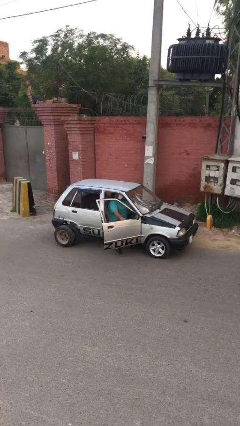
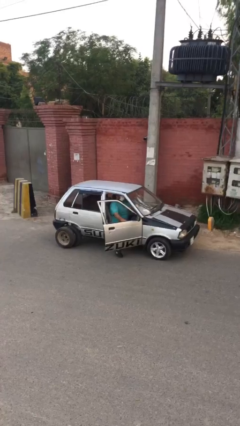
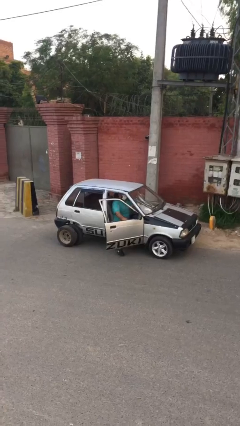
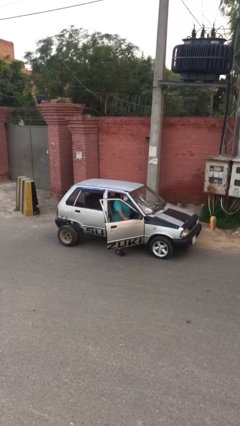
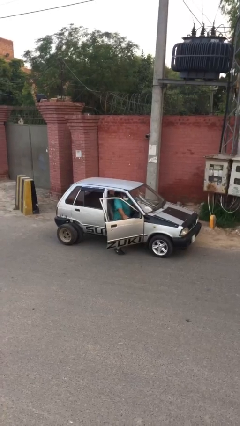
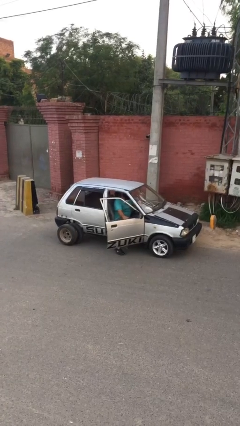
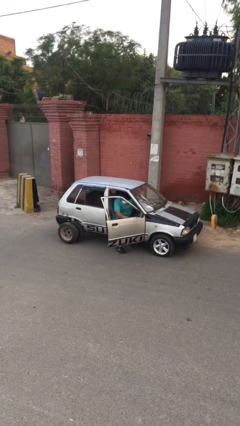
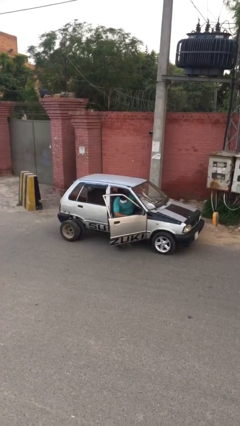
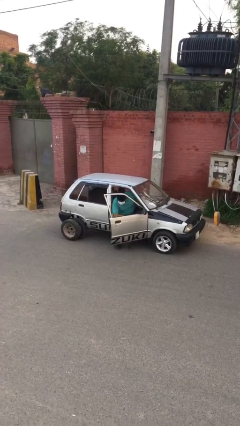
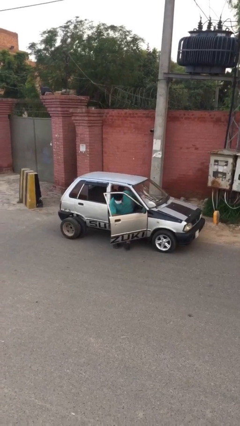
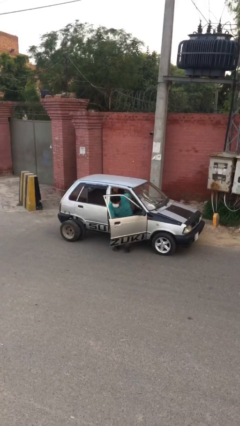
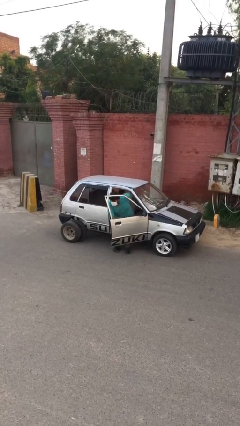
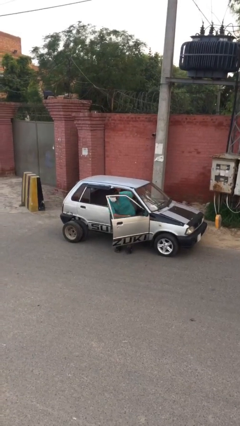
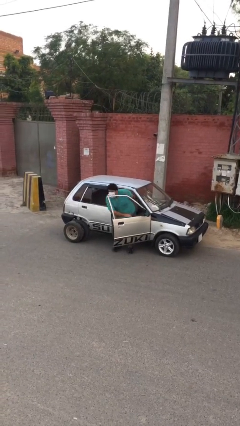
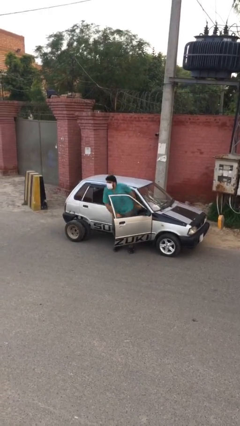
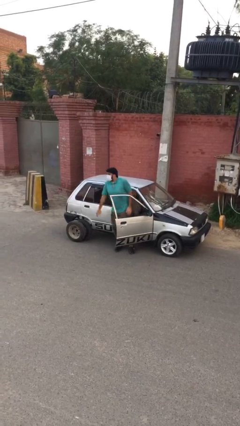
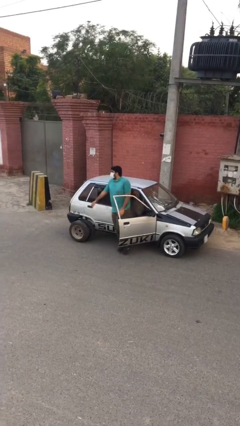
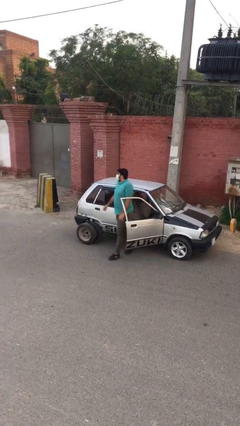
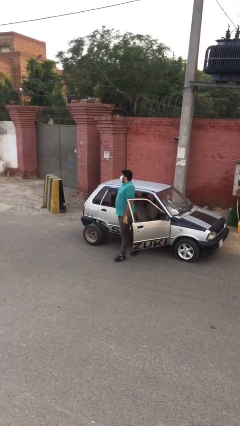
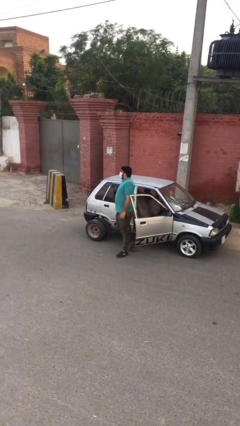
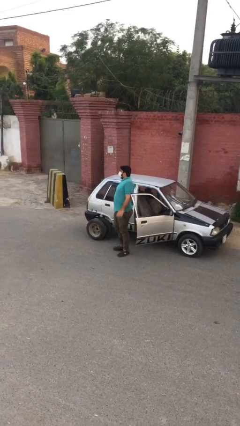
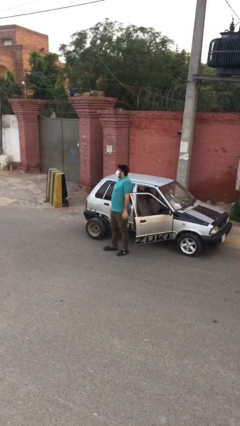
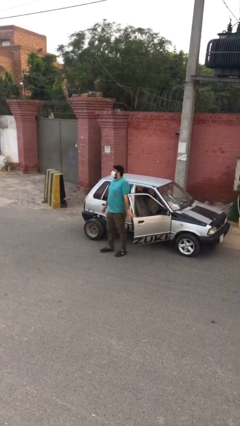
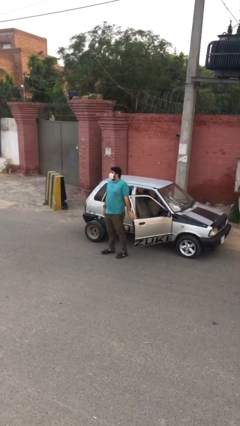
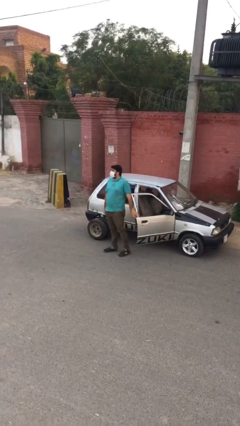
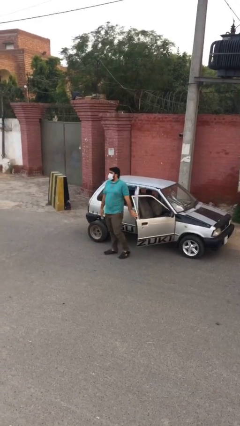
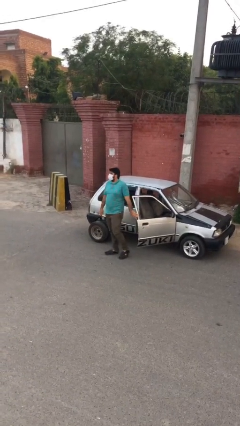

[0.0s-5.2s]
person exits car

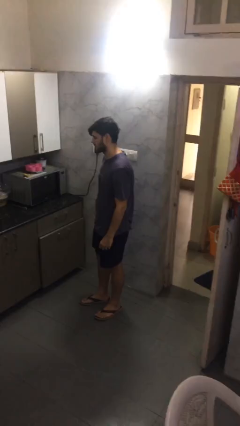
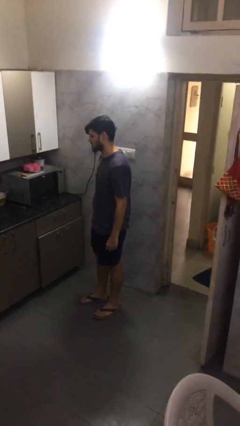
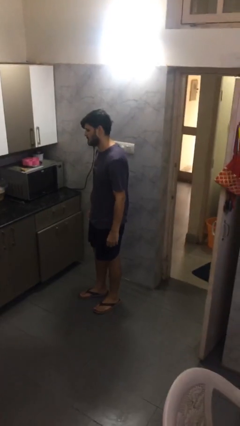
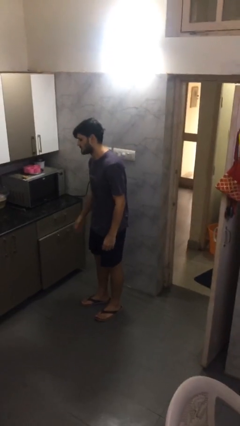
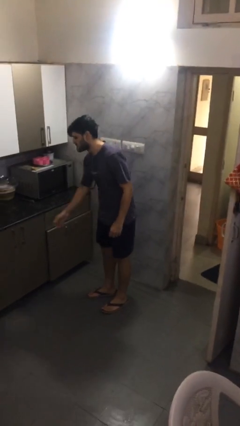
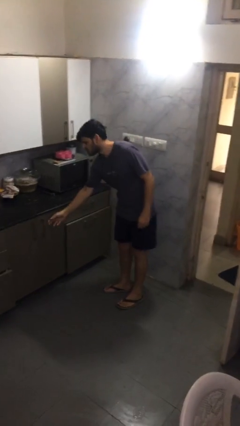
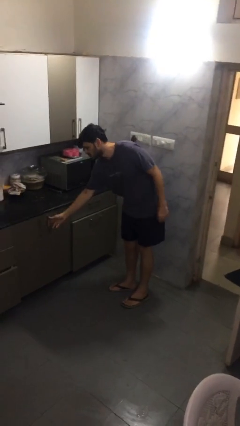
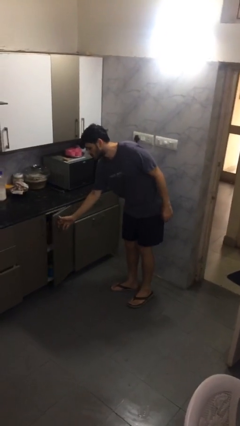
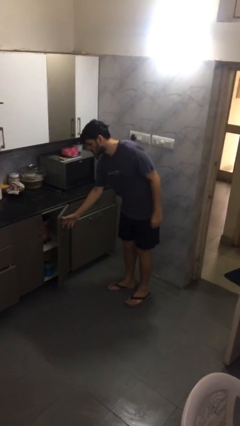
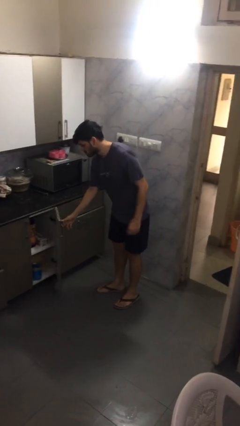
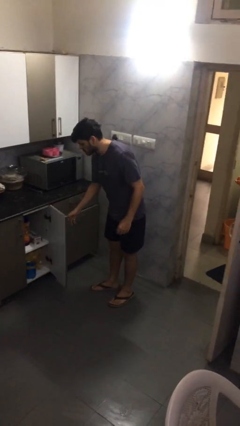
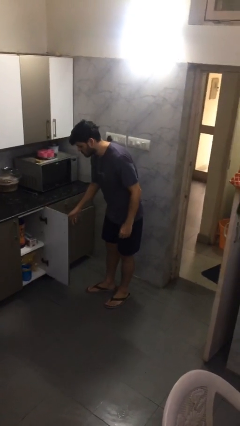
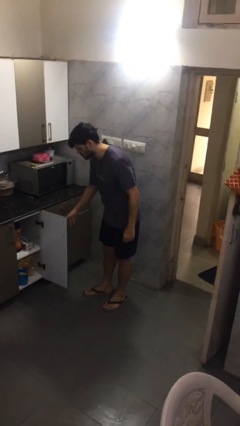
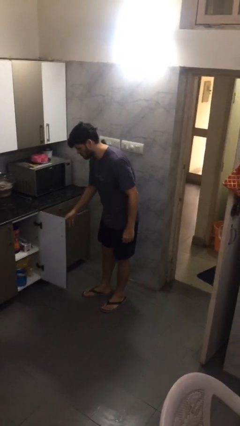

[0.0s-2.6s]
person opens cabinet

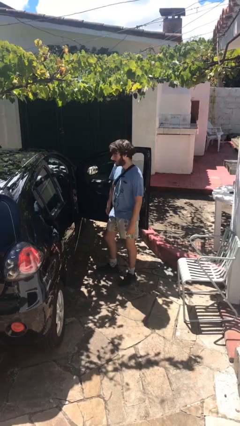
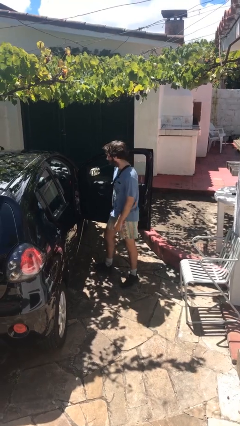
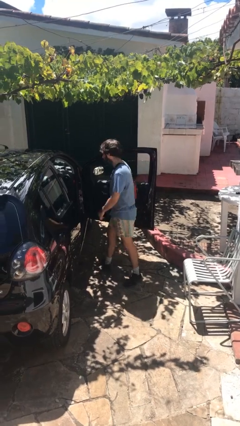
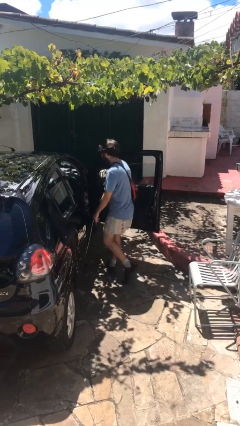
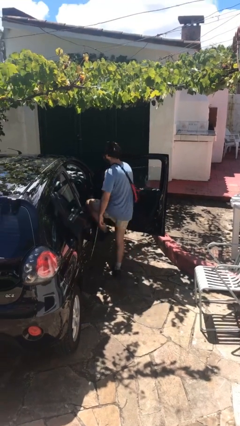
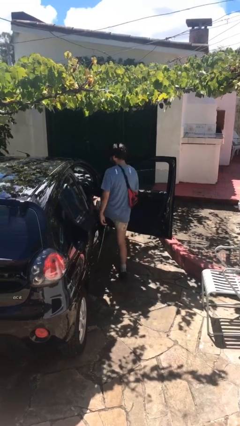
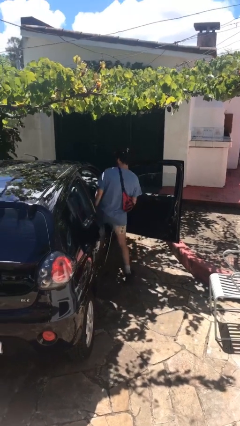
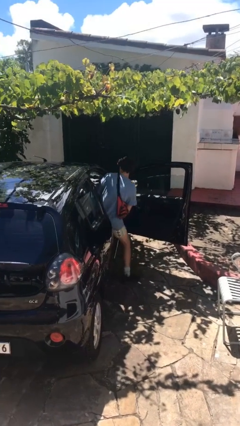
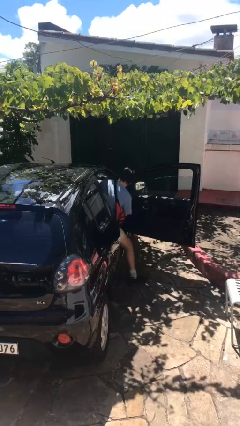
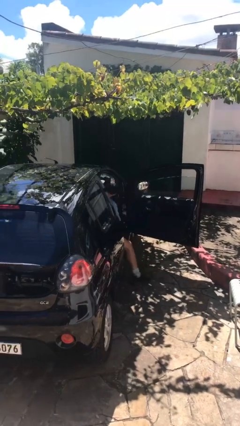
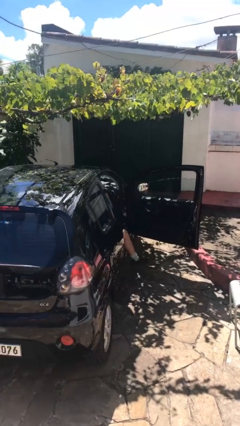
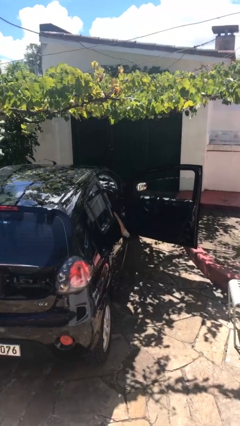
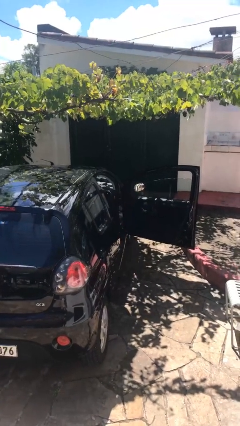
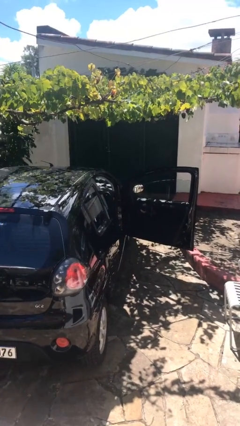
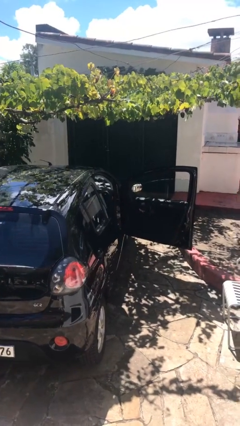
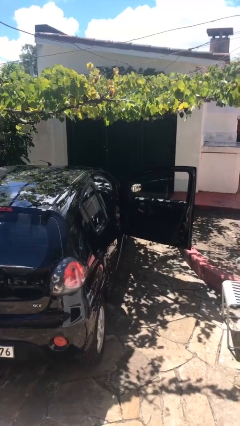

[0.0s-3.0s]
person enters car

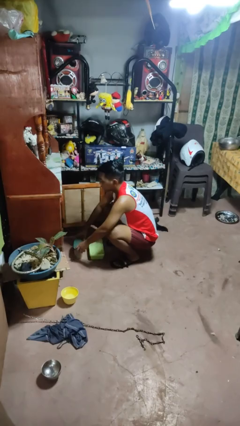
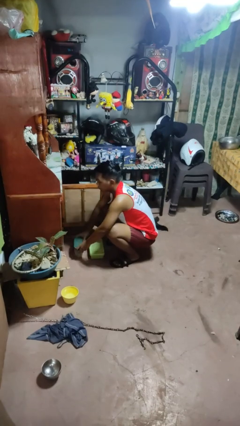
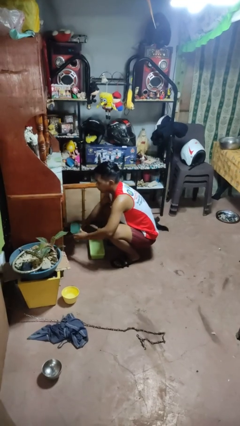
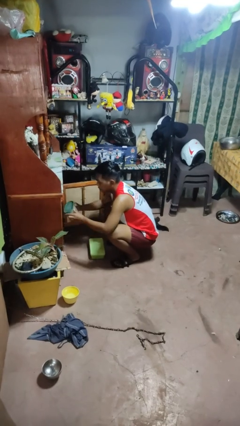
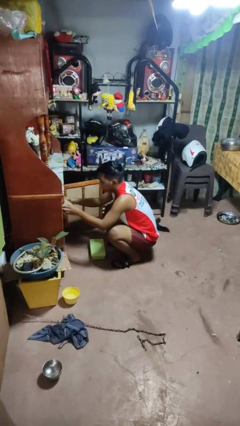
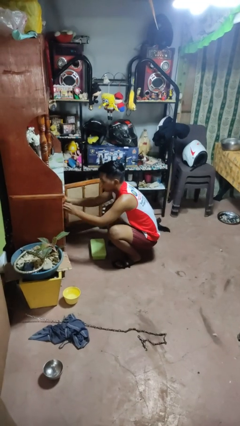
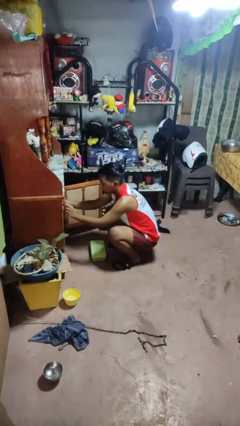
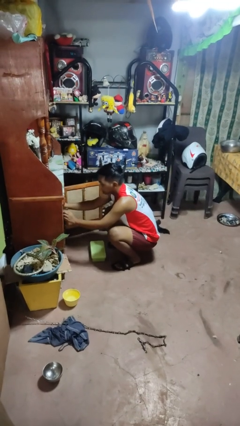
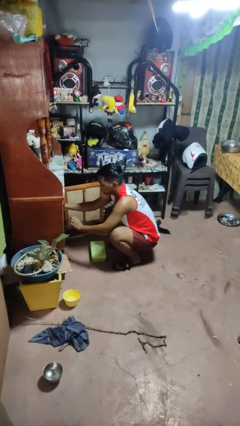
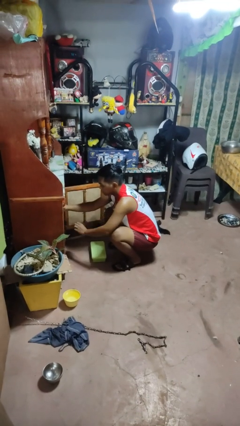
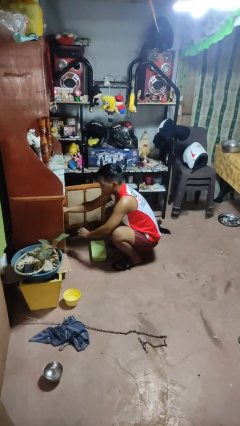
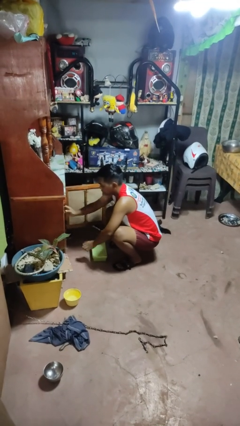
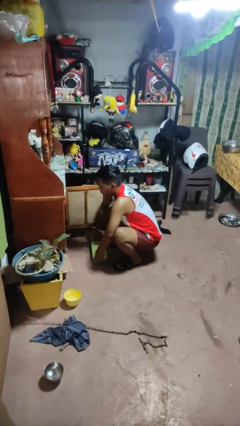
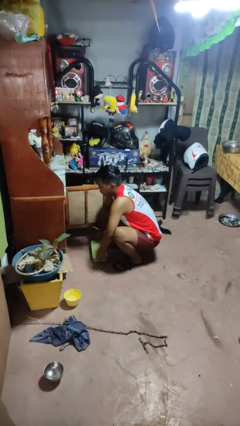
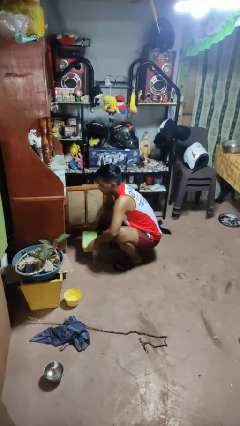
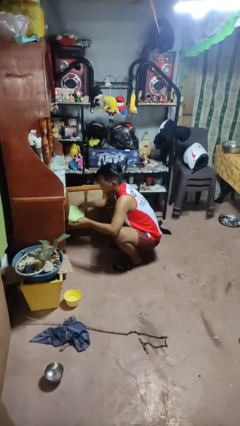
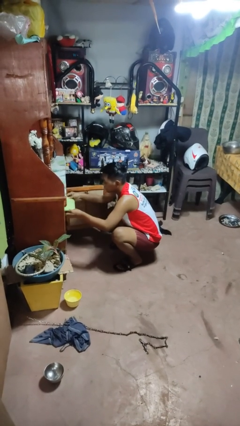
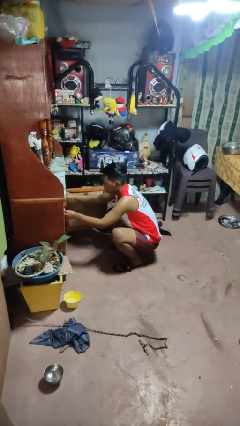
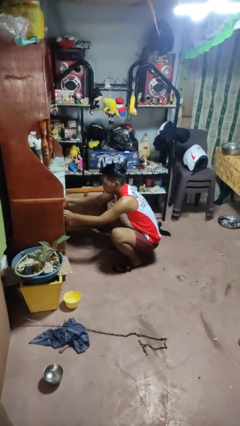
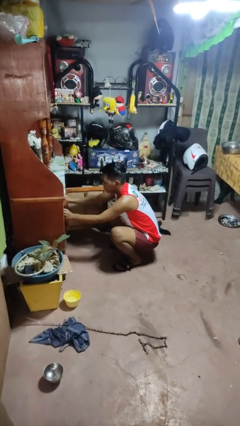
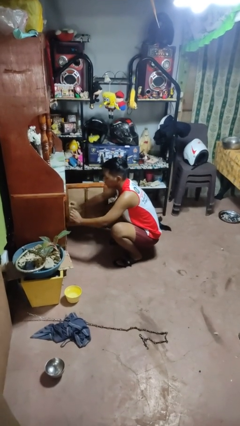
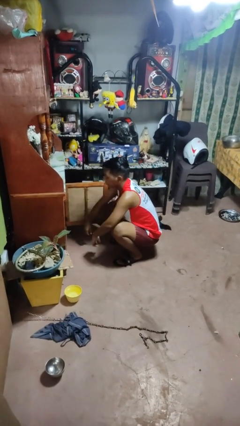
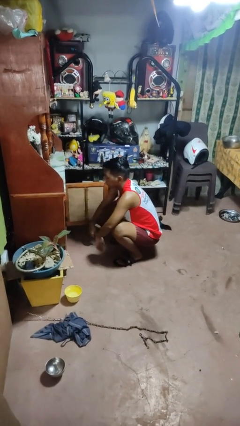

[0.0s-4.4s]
person puts object in cabinet

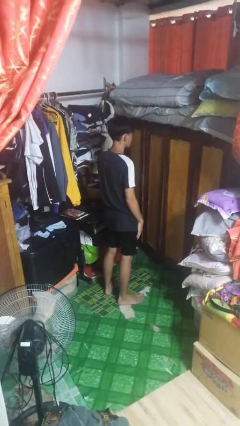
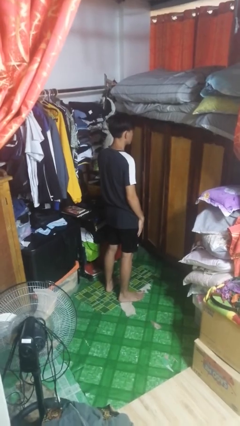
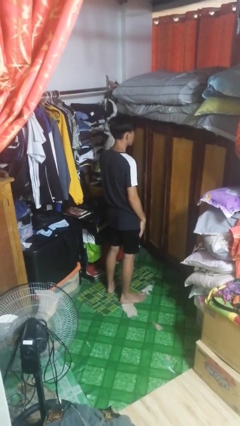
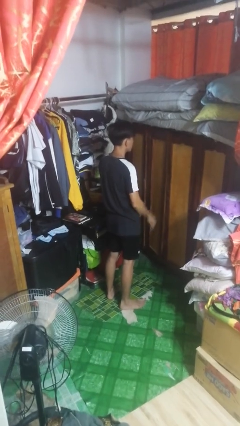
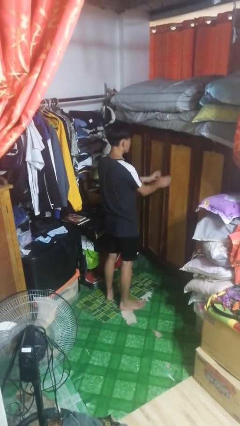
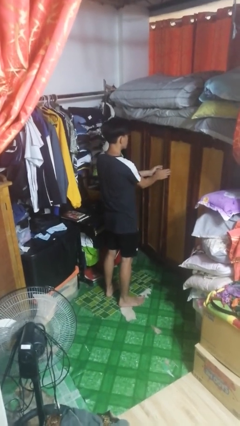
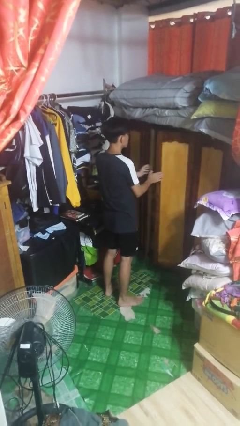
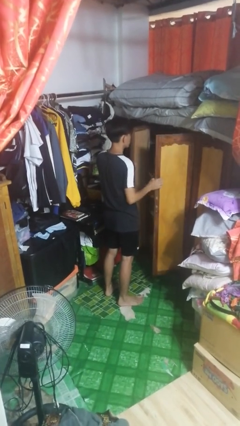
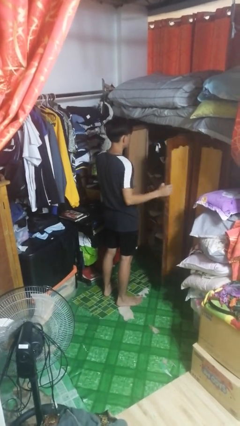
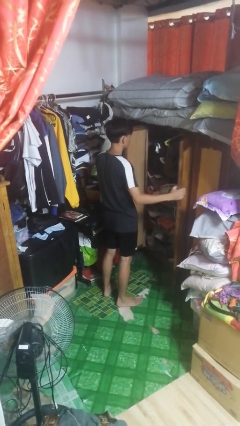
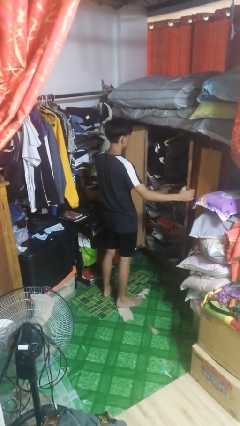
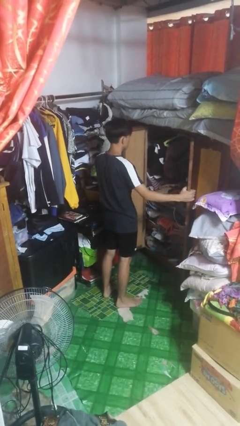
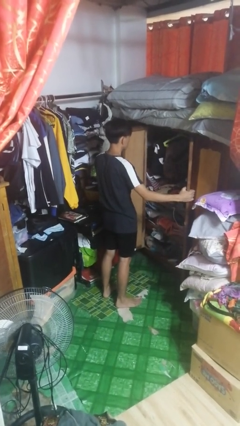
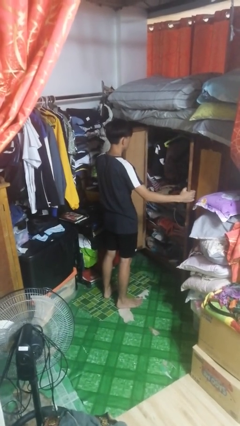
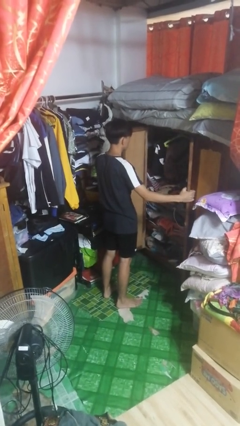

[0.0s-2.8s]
person opens dresser drawer
